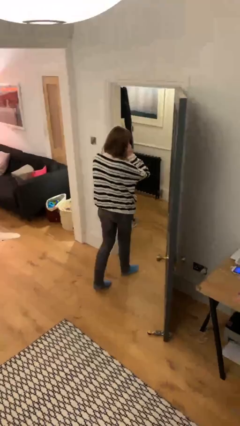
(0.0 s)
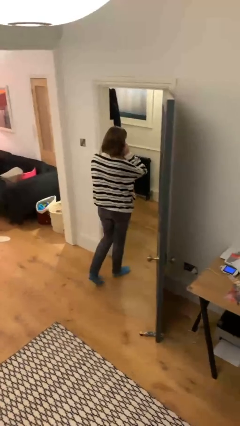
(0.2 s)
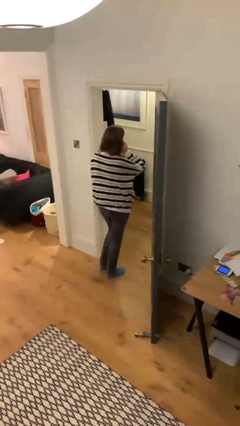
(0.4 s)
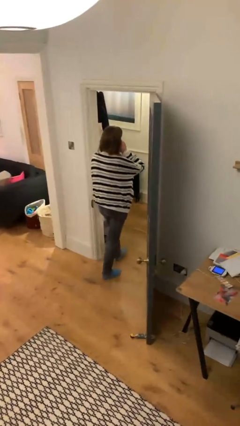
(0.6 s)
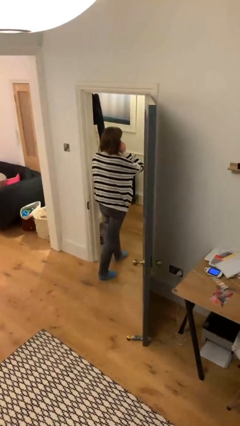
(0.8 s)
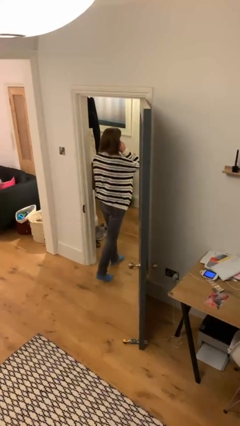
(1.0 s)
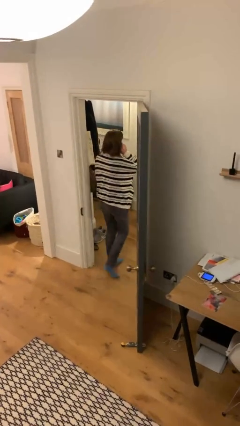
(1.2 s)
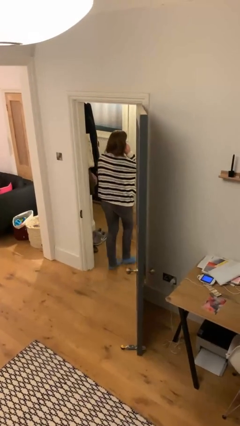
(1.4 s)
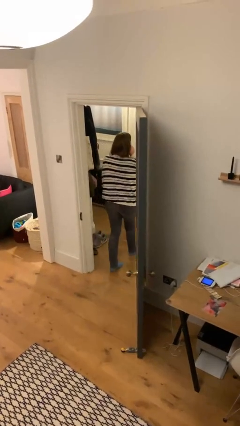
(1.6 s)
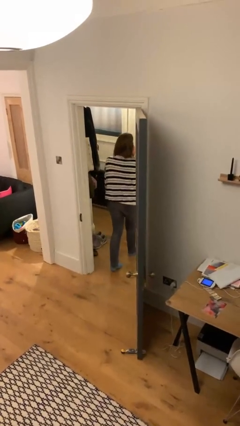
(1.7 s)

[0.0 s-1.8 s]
person exits scene through structure

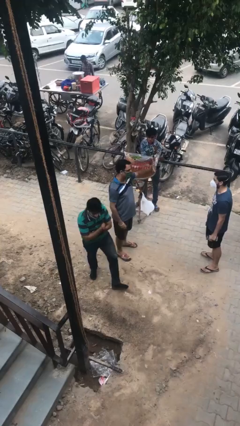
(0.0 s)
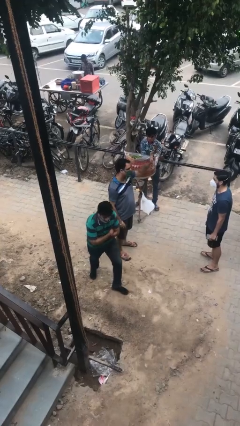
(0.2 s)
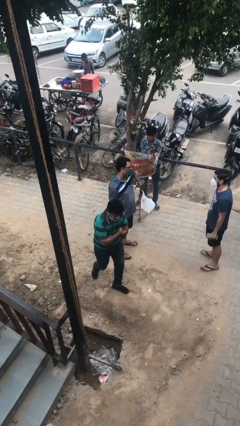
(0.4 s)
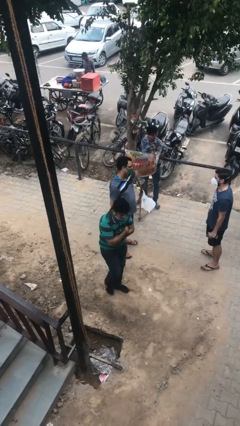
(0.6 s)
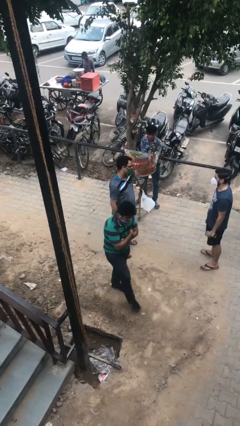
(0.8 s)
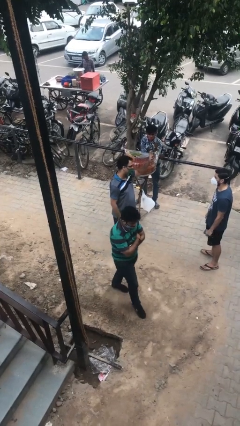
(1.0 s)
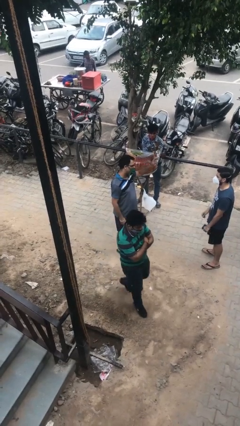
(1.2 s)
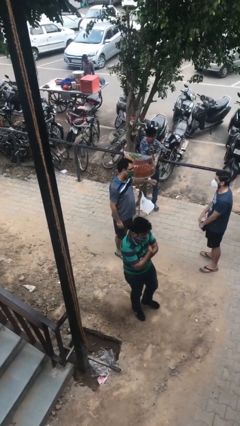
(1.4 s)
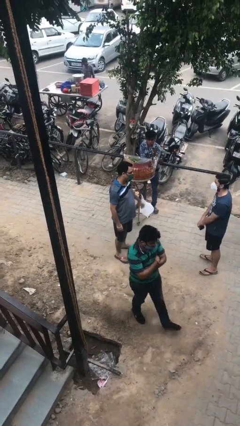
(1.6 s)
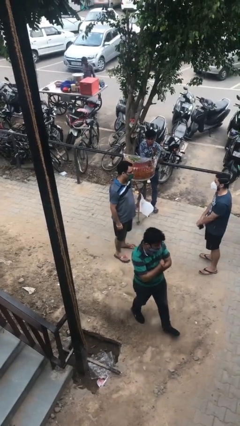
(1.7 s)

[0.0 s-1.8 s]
person waves at person

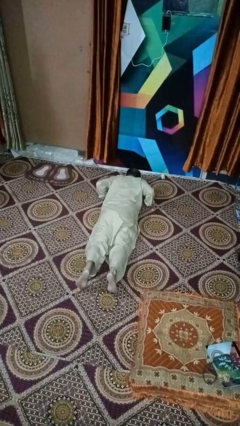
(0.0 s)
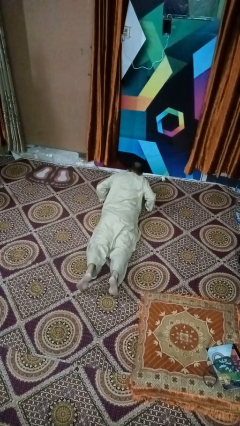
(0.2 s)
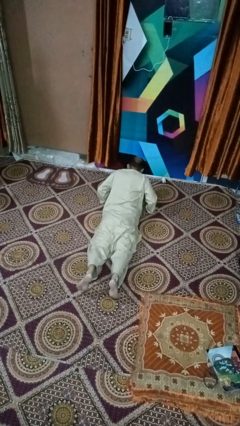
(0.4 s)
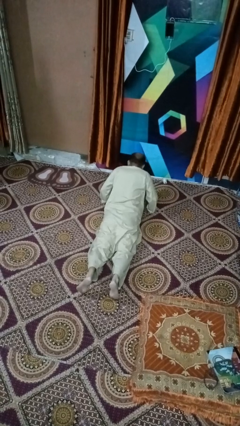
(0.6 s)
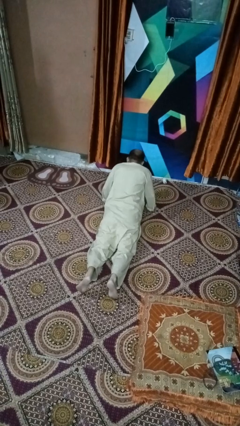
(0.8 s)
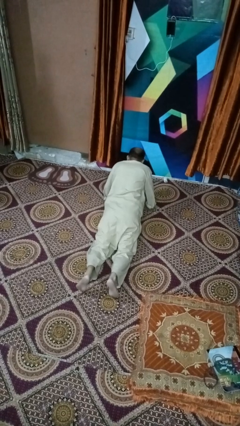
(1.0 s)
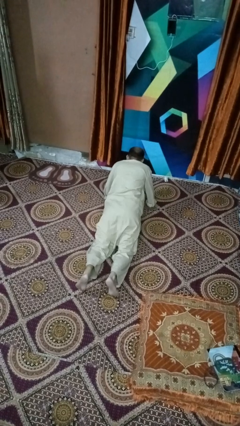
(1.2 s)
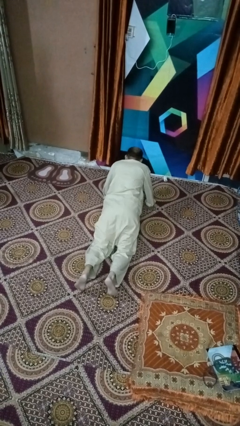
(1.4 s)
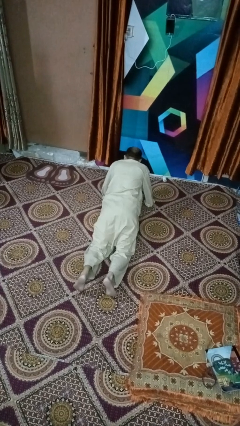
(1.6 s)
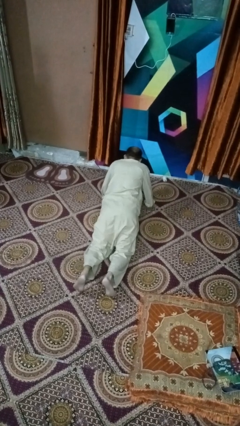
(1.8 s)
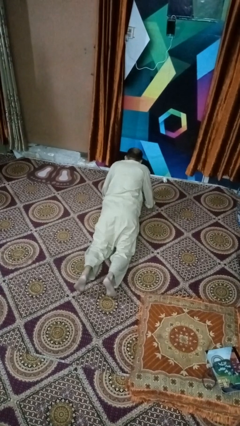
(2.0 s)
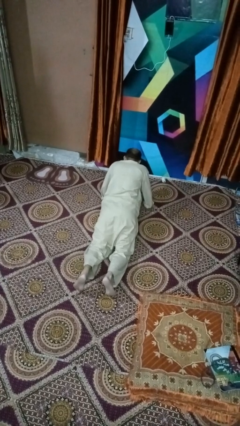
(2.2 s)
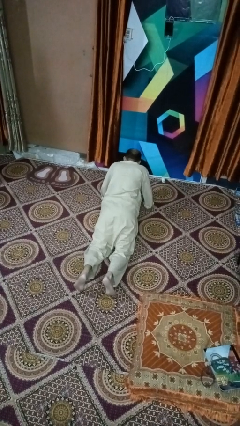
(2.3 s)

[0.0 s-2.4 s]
person exercises with situp

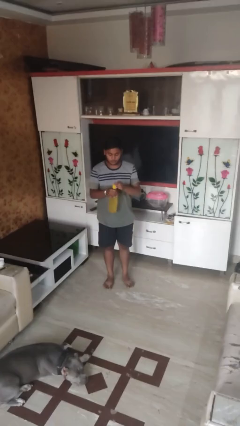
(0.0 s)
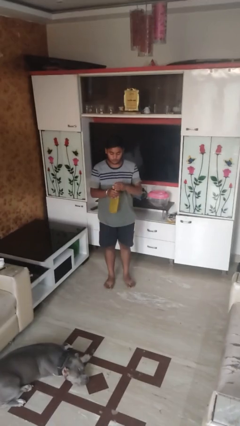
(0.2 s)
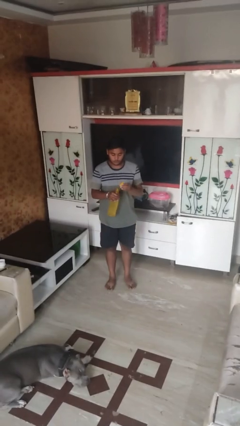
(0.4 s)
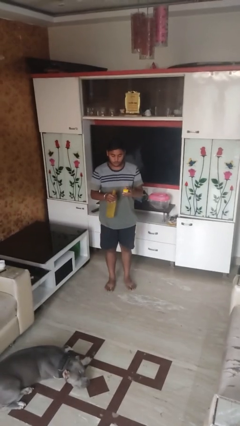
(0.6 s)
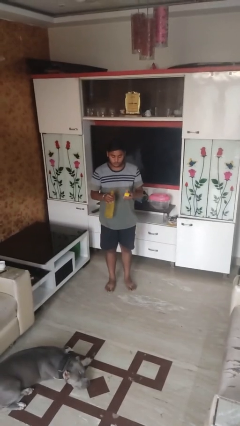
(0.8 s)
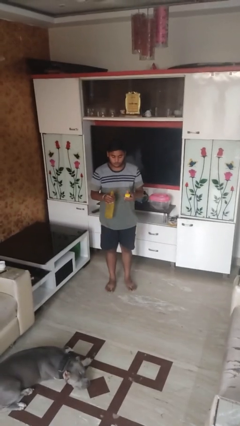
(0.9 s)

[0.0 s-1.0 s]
person unscrews lid from bottle

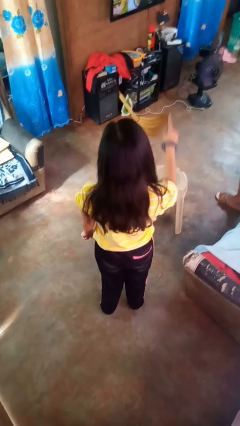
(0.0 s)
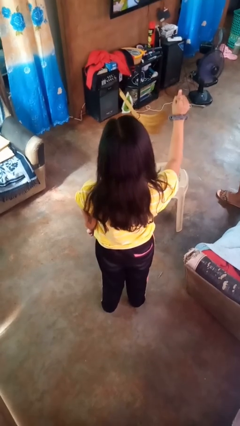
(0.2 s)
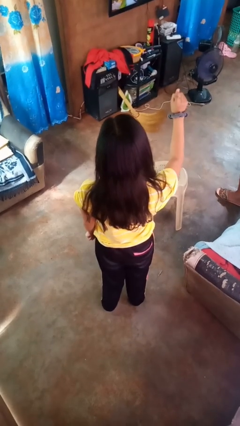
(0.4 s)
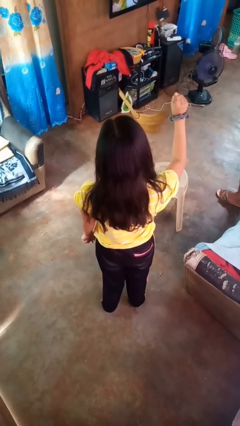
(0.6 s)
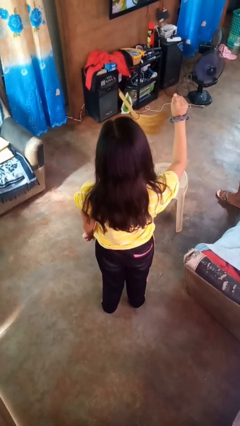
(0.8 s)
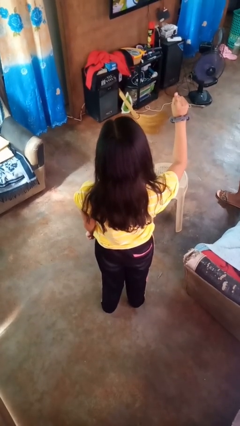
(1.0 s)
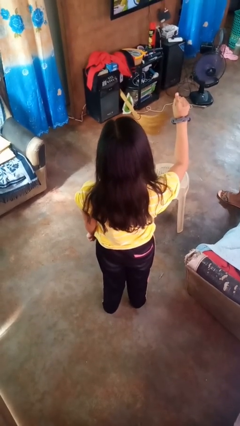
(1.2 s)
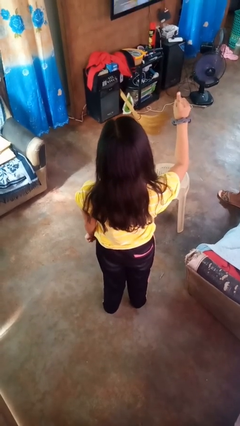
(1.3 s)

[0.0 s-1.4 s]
person gestures number one

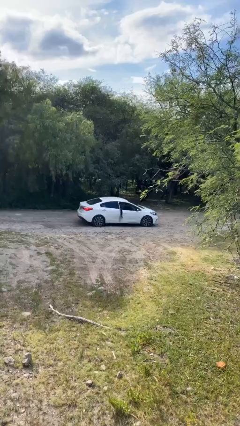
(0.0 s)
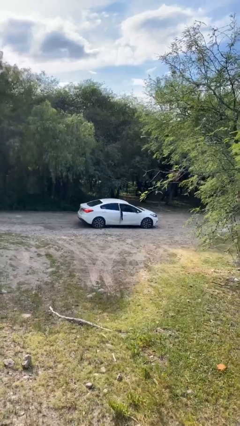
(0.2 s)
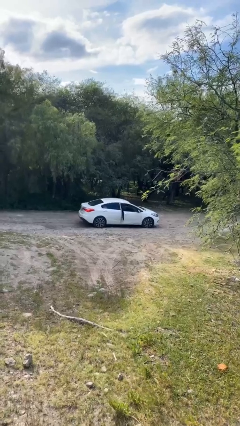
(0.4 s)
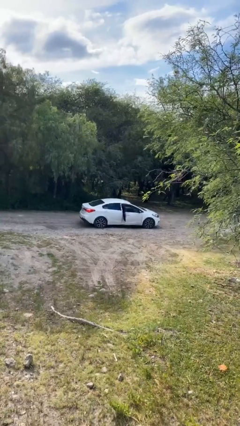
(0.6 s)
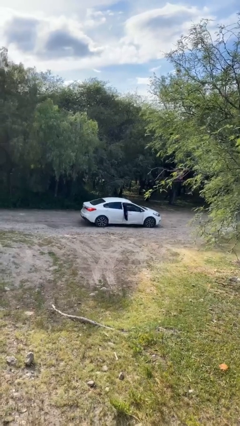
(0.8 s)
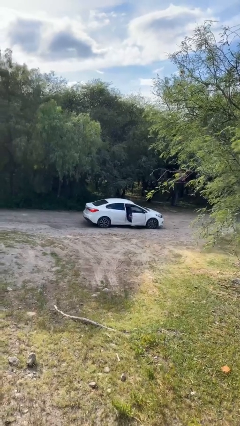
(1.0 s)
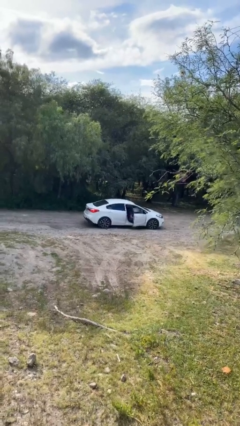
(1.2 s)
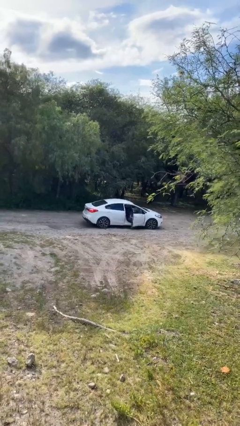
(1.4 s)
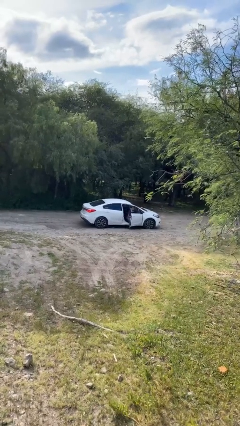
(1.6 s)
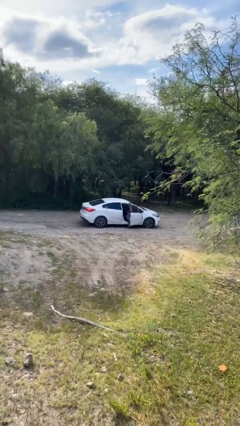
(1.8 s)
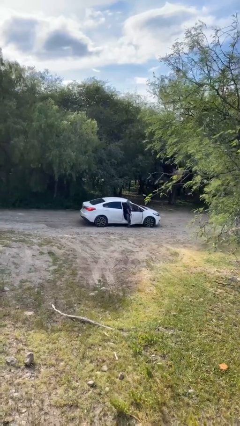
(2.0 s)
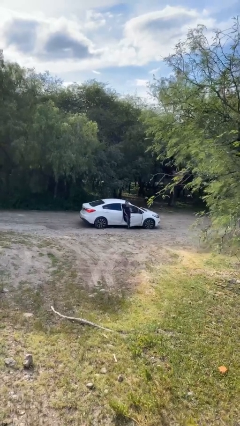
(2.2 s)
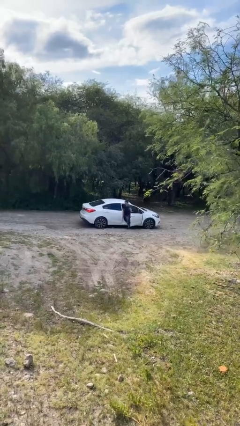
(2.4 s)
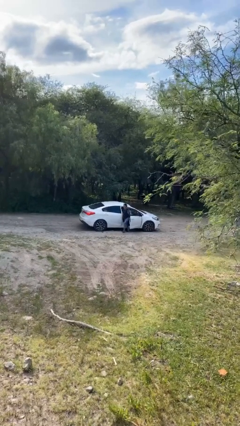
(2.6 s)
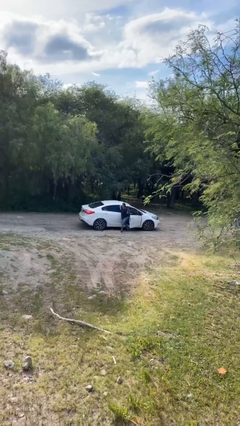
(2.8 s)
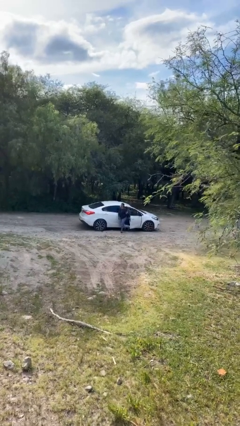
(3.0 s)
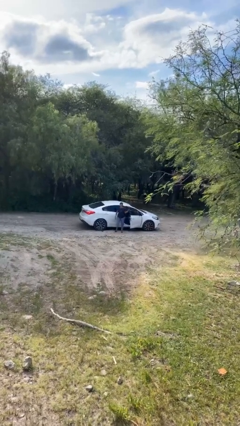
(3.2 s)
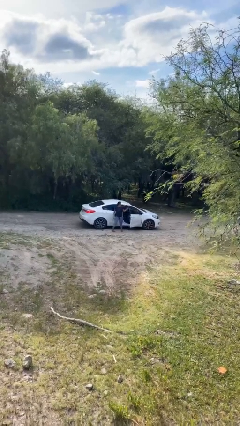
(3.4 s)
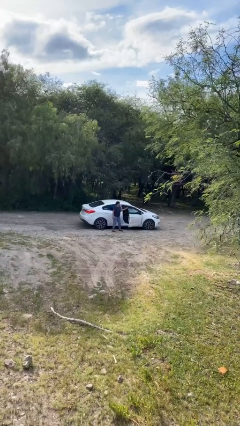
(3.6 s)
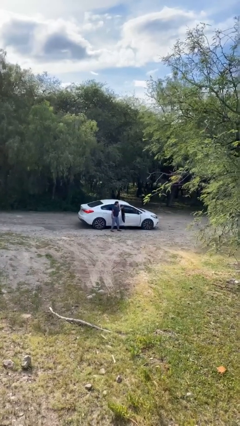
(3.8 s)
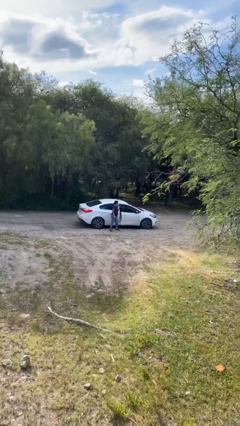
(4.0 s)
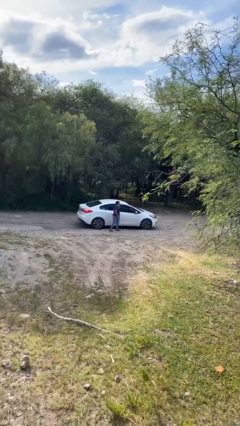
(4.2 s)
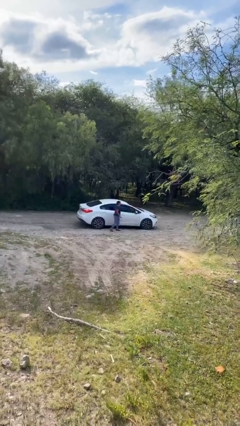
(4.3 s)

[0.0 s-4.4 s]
car drops off person

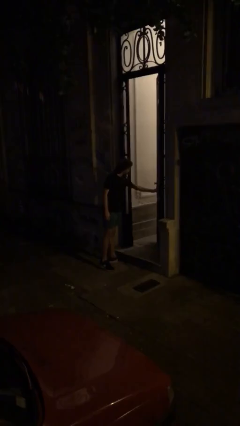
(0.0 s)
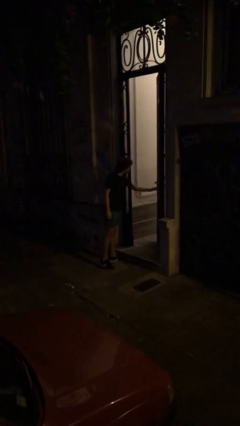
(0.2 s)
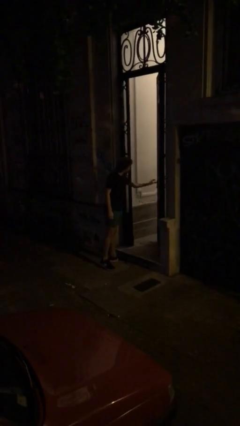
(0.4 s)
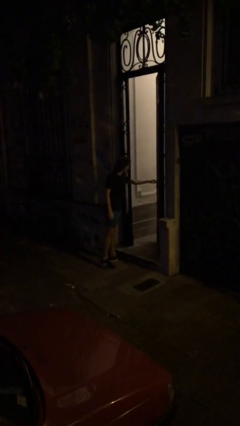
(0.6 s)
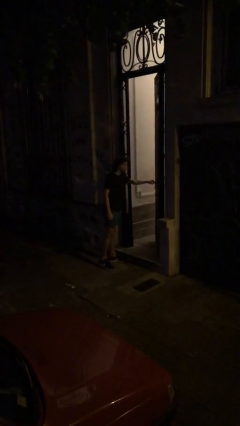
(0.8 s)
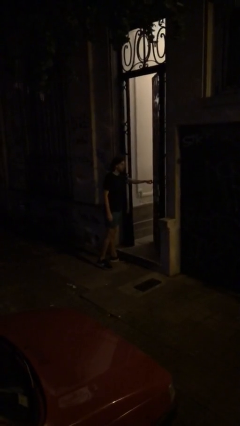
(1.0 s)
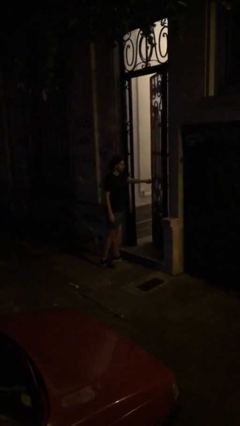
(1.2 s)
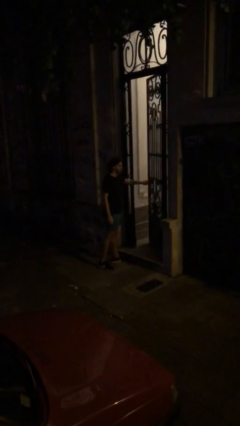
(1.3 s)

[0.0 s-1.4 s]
person closes facility door

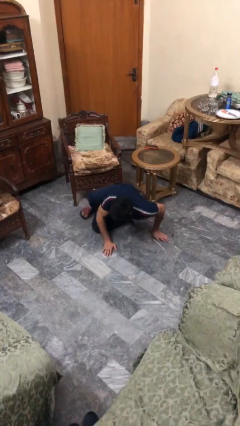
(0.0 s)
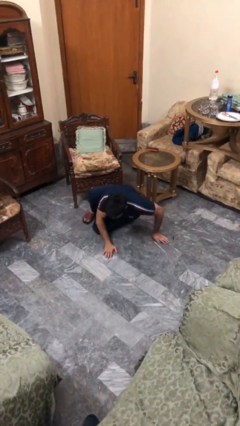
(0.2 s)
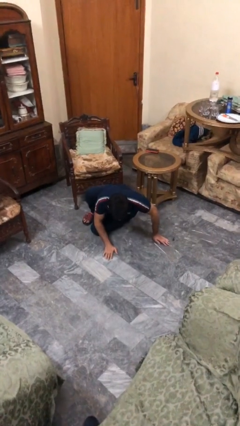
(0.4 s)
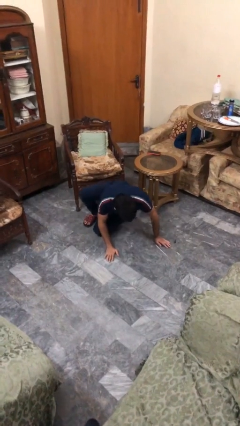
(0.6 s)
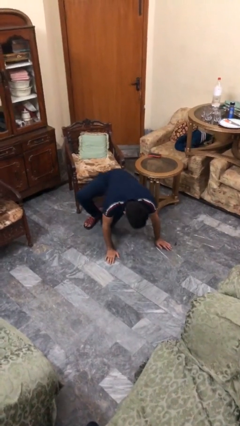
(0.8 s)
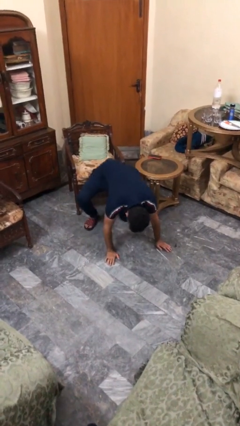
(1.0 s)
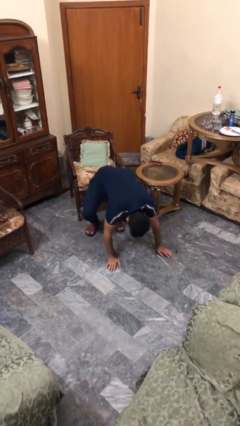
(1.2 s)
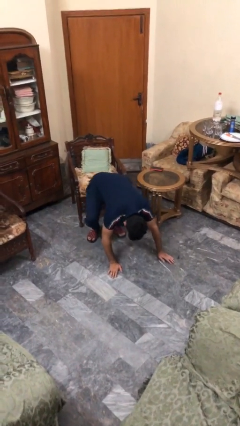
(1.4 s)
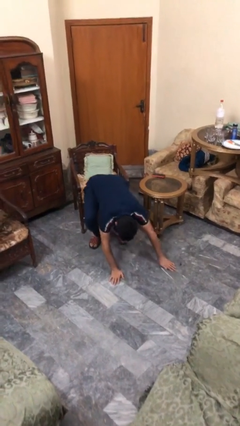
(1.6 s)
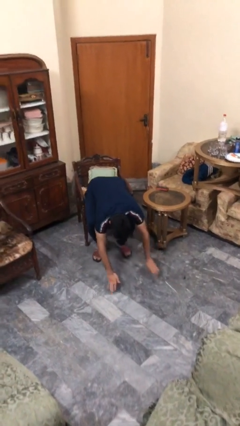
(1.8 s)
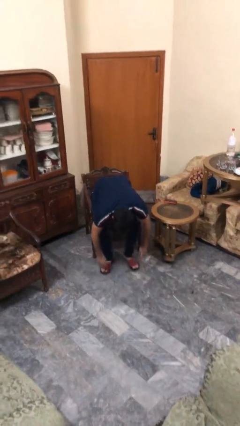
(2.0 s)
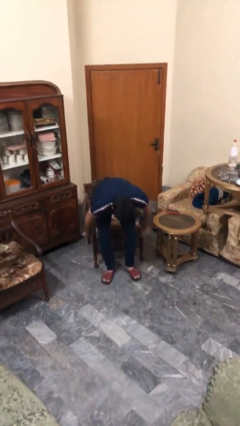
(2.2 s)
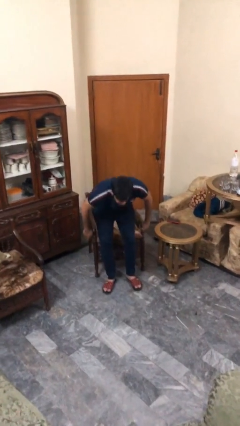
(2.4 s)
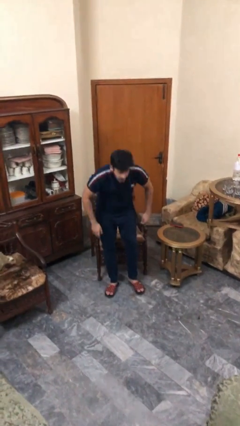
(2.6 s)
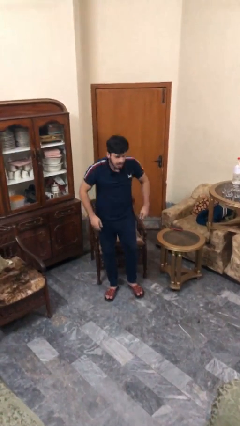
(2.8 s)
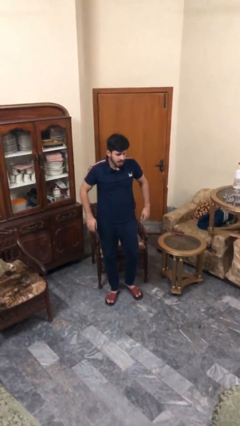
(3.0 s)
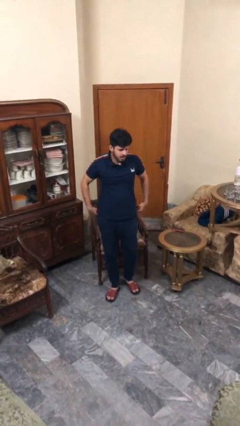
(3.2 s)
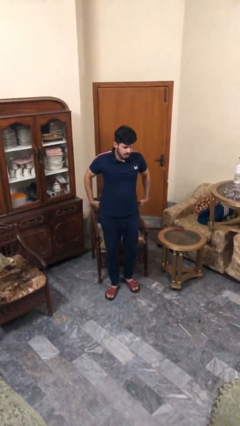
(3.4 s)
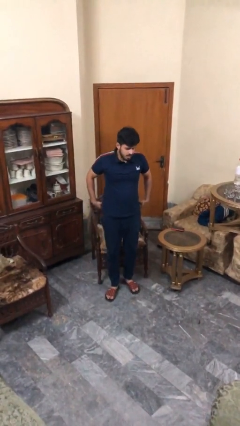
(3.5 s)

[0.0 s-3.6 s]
person stands up from floor
